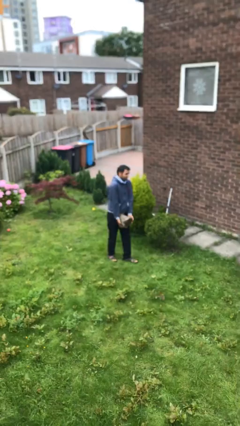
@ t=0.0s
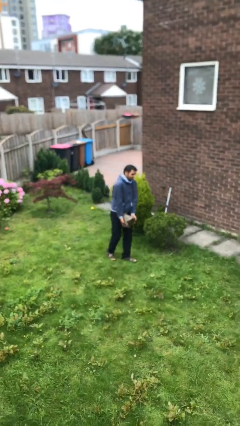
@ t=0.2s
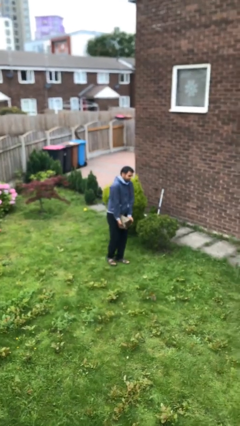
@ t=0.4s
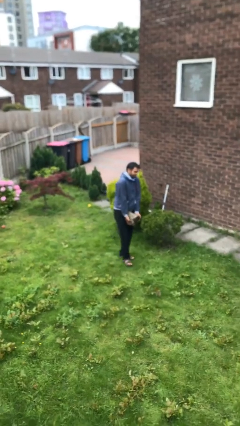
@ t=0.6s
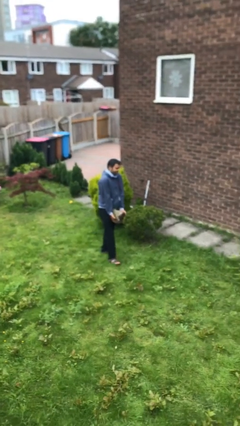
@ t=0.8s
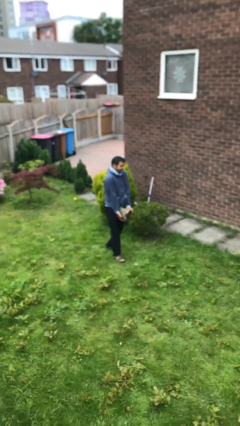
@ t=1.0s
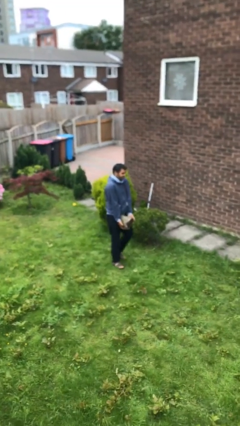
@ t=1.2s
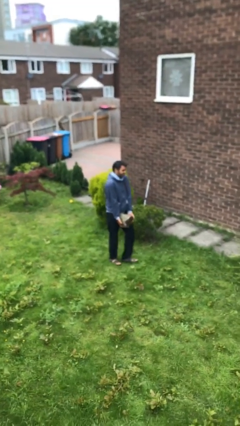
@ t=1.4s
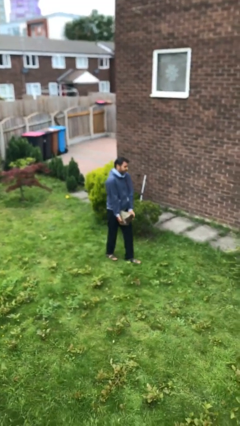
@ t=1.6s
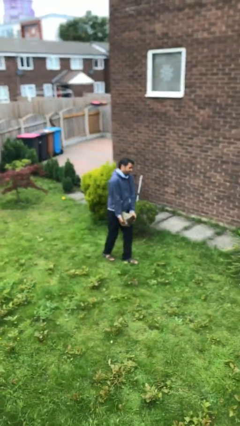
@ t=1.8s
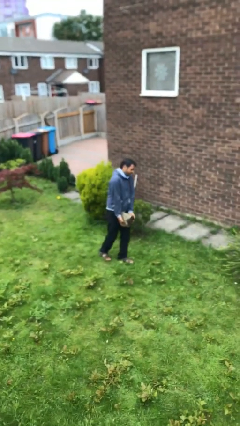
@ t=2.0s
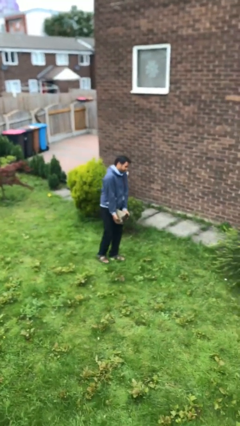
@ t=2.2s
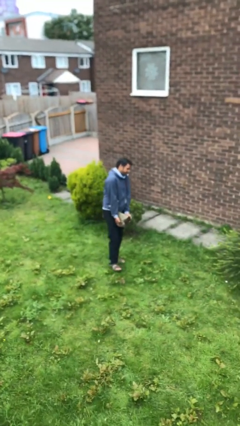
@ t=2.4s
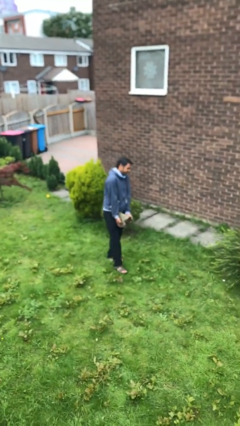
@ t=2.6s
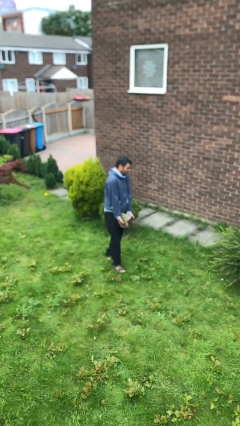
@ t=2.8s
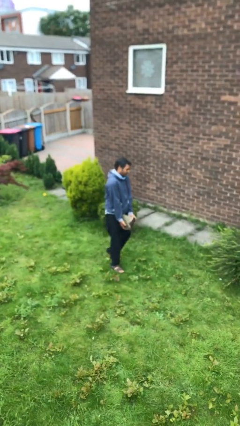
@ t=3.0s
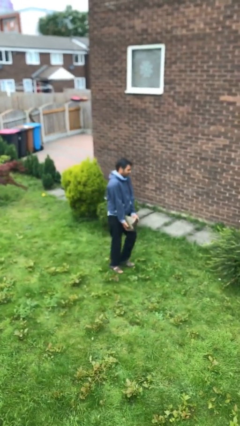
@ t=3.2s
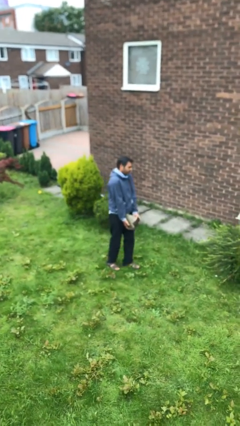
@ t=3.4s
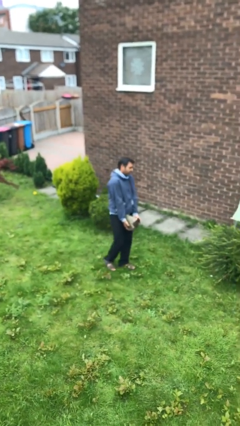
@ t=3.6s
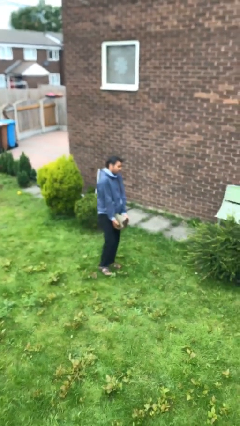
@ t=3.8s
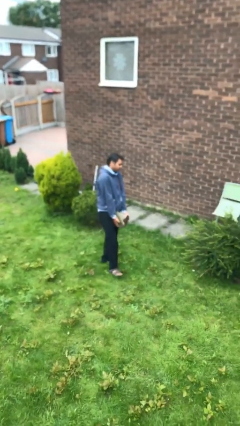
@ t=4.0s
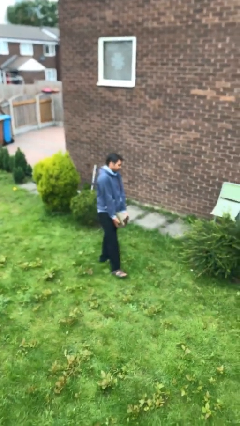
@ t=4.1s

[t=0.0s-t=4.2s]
person carries heavy object

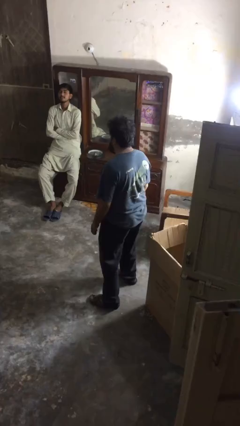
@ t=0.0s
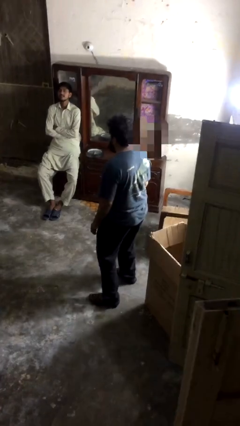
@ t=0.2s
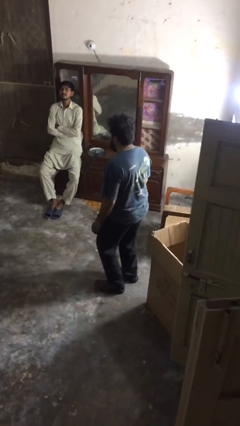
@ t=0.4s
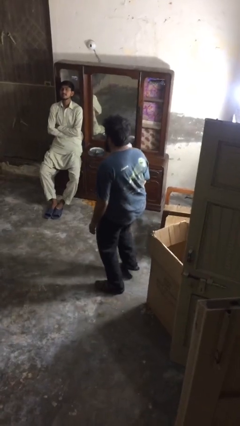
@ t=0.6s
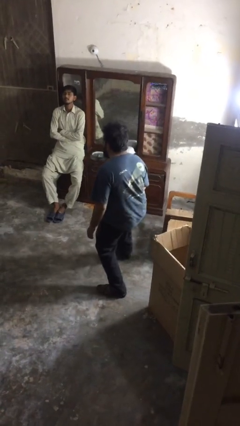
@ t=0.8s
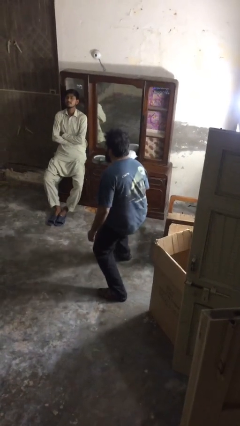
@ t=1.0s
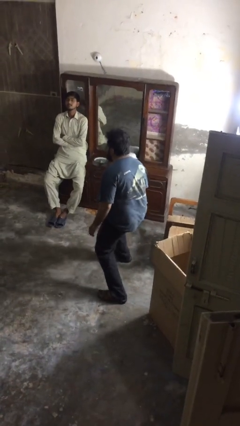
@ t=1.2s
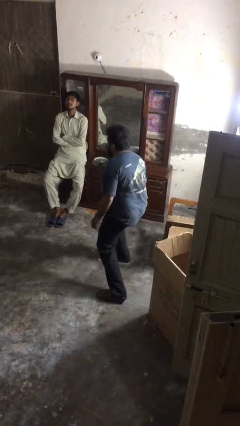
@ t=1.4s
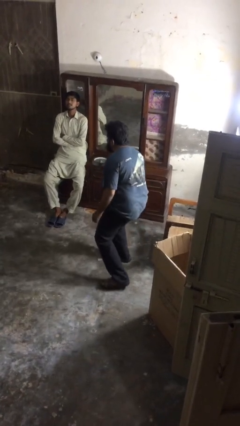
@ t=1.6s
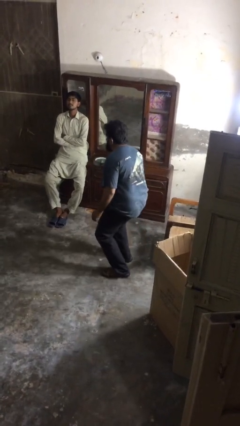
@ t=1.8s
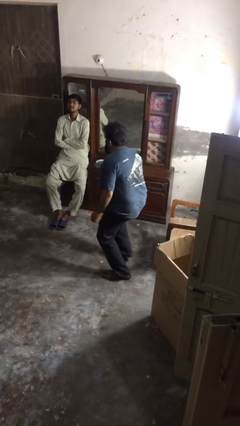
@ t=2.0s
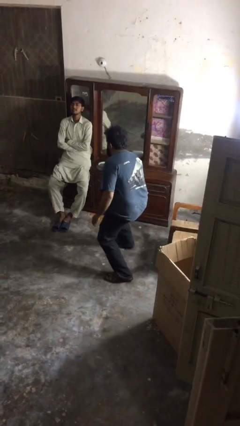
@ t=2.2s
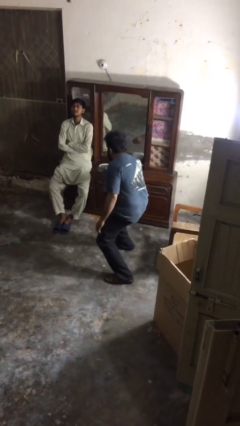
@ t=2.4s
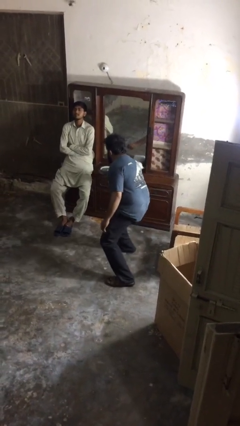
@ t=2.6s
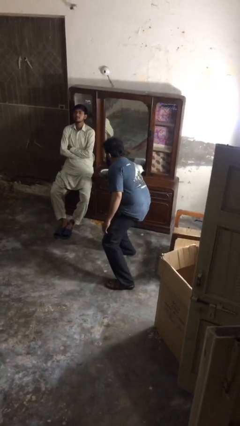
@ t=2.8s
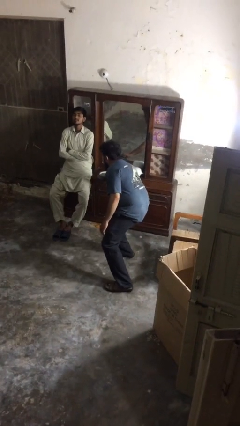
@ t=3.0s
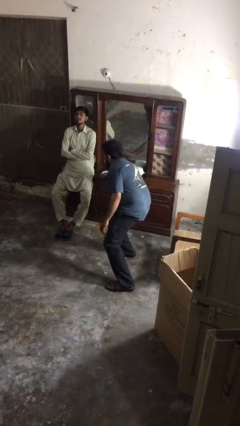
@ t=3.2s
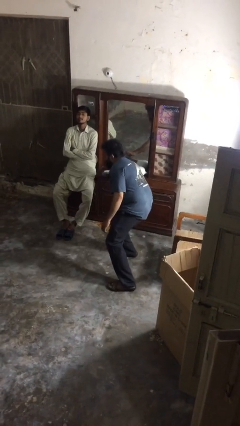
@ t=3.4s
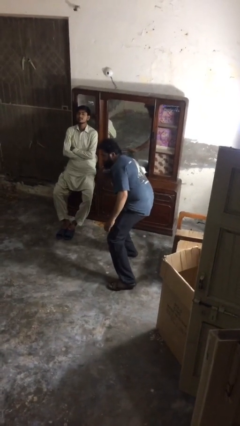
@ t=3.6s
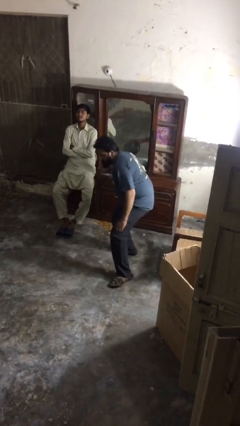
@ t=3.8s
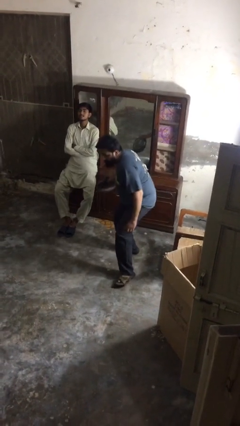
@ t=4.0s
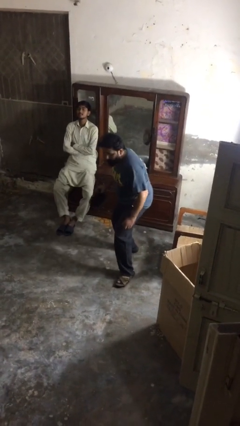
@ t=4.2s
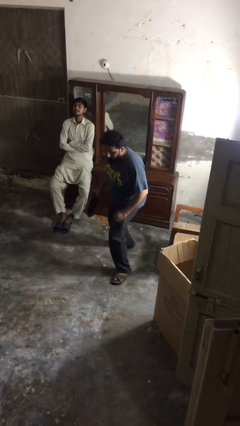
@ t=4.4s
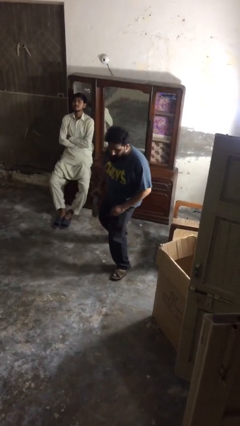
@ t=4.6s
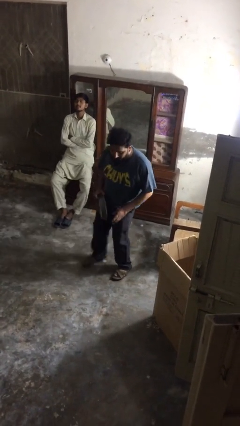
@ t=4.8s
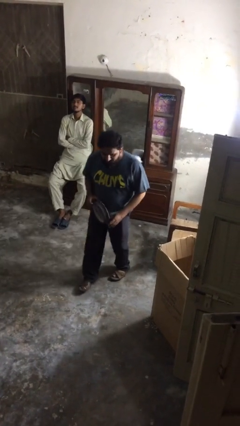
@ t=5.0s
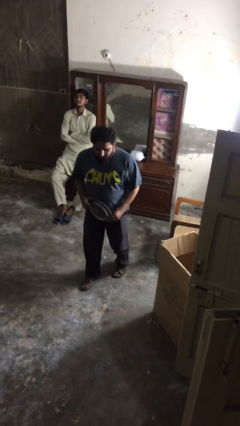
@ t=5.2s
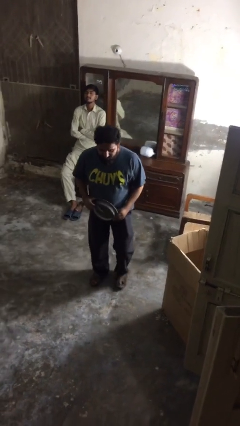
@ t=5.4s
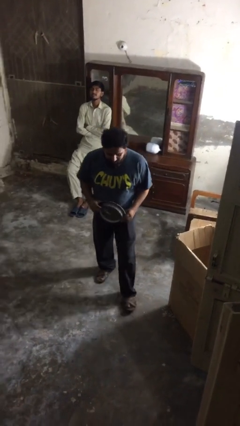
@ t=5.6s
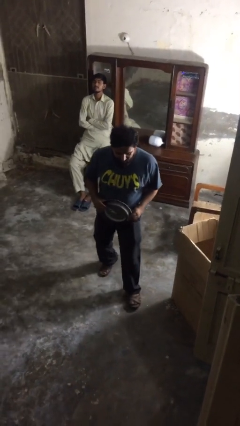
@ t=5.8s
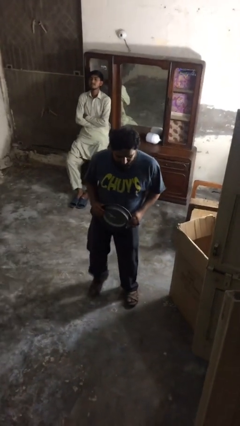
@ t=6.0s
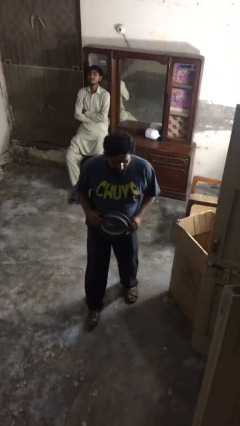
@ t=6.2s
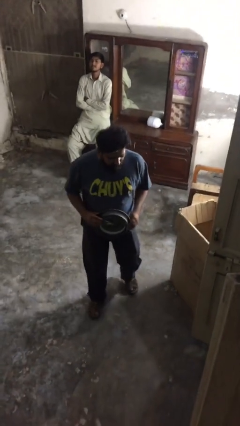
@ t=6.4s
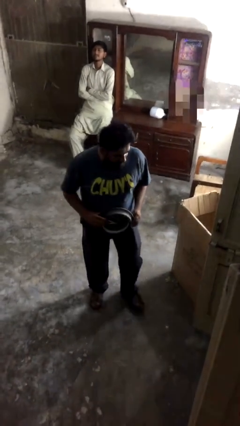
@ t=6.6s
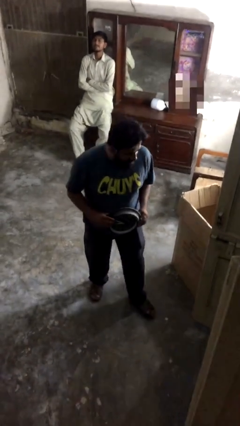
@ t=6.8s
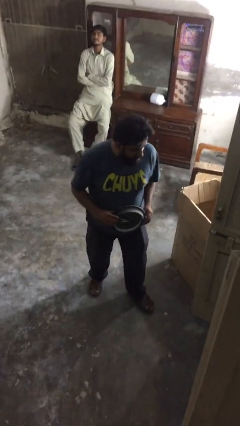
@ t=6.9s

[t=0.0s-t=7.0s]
person steals object from person

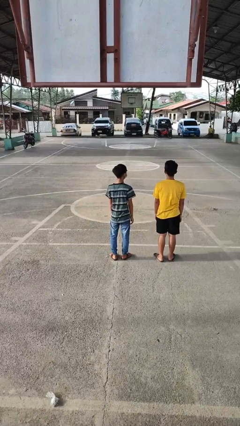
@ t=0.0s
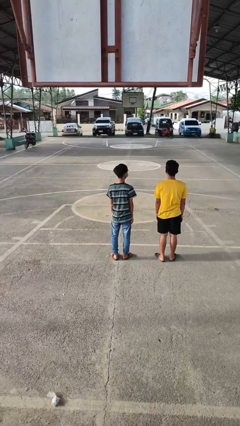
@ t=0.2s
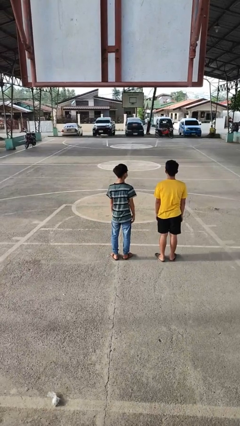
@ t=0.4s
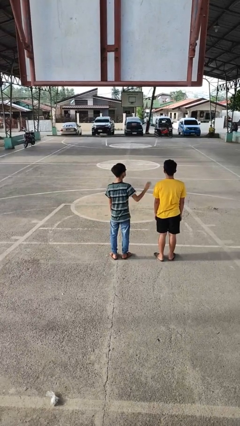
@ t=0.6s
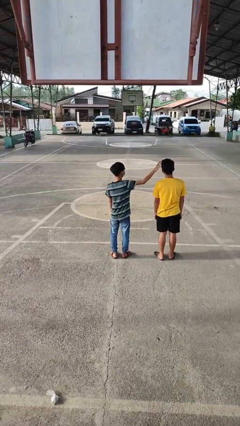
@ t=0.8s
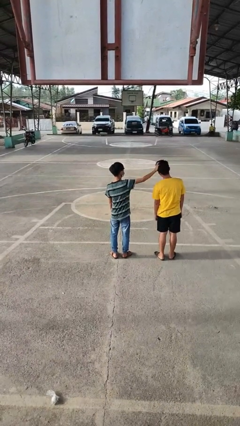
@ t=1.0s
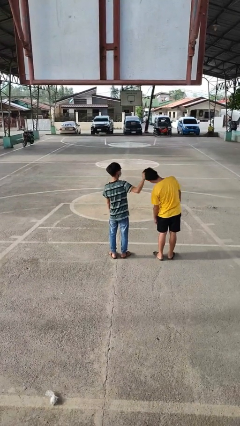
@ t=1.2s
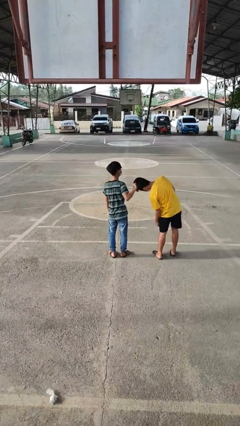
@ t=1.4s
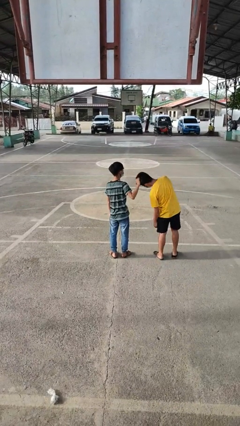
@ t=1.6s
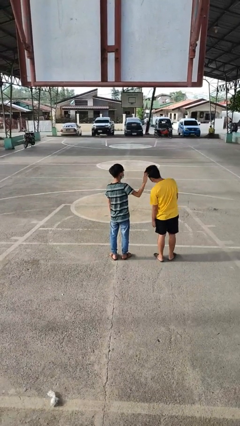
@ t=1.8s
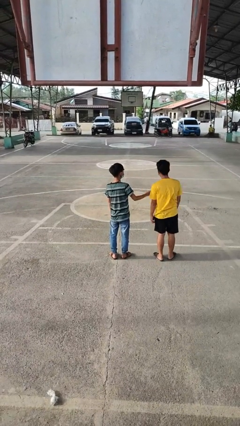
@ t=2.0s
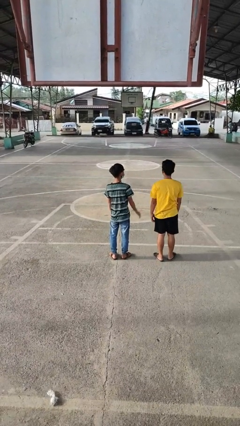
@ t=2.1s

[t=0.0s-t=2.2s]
person grabs person by hair

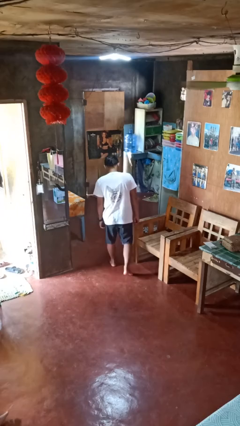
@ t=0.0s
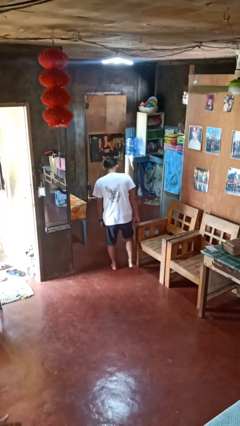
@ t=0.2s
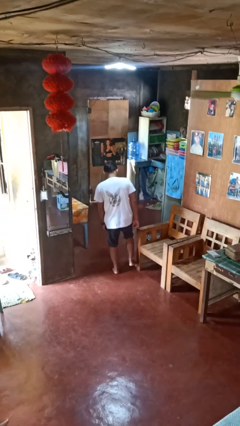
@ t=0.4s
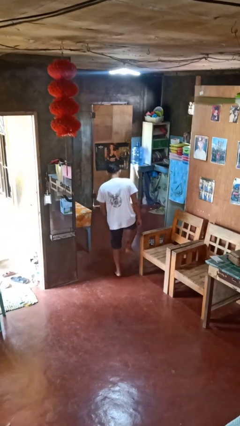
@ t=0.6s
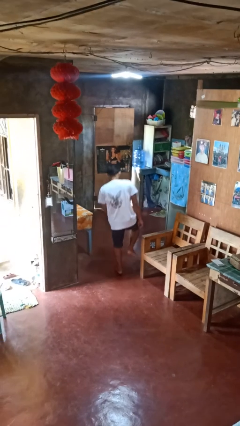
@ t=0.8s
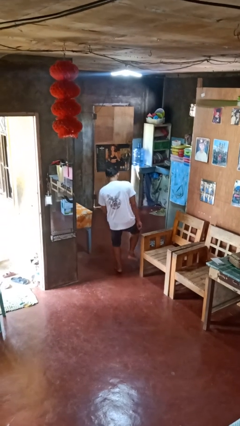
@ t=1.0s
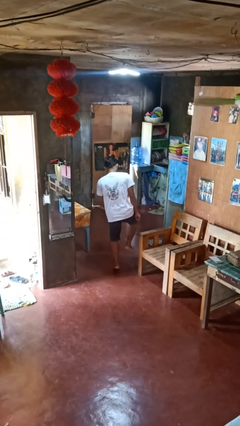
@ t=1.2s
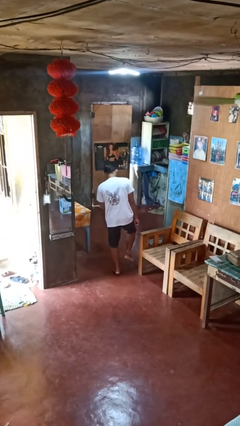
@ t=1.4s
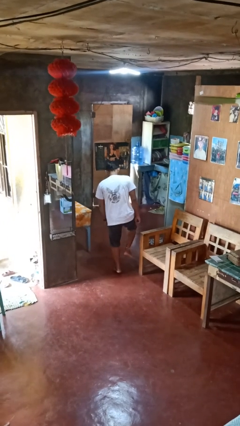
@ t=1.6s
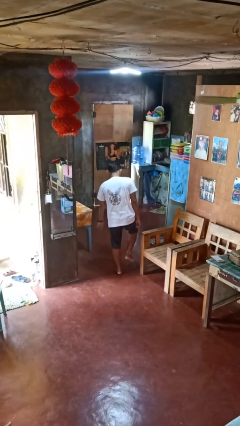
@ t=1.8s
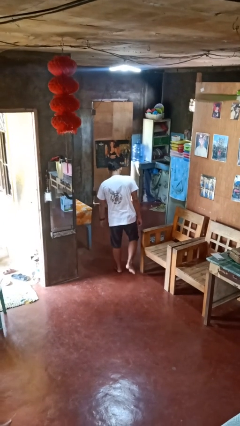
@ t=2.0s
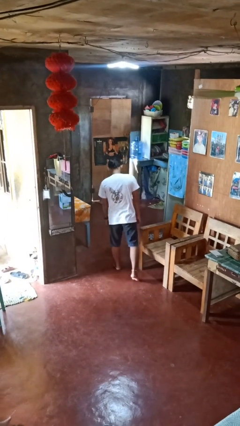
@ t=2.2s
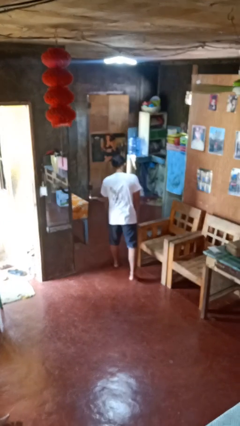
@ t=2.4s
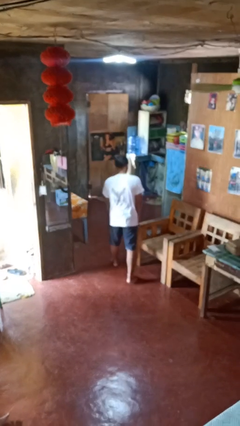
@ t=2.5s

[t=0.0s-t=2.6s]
person stubs toe

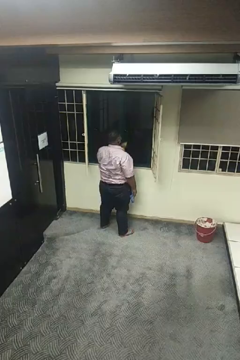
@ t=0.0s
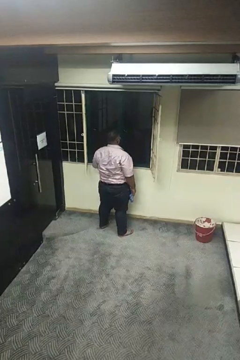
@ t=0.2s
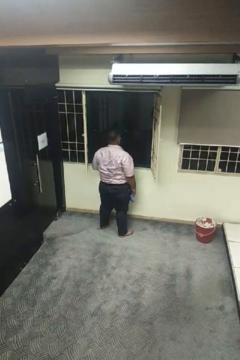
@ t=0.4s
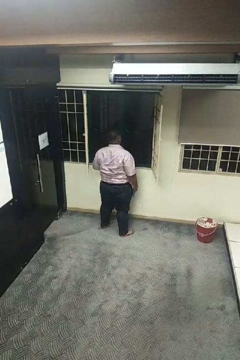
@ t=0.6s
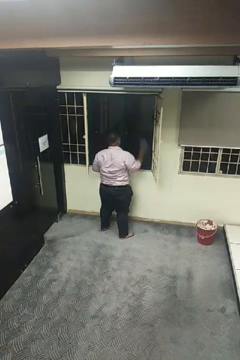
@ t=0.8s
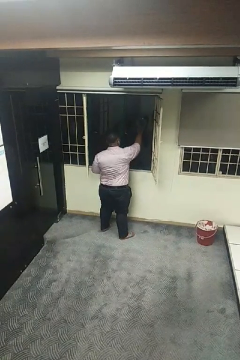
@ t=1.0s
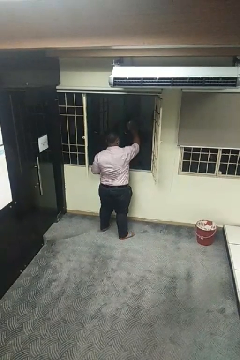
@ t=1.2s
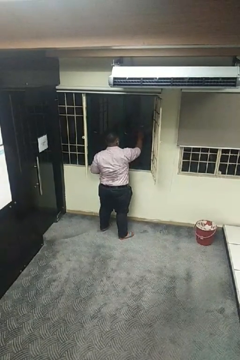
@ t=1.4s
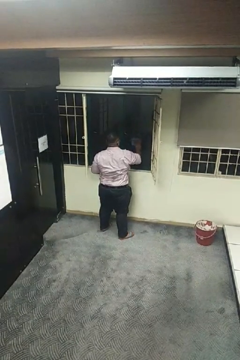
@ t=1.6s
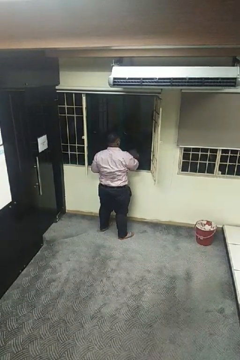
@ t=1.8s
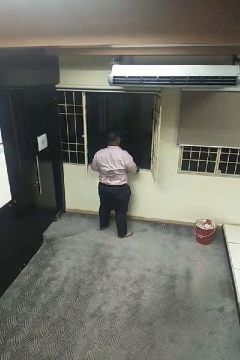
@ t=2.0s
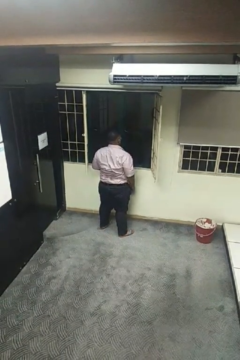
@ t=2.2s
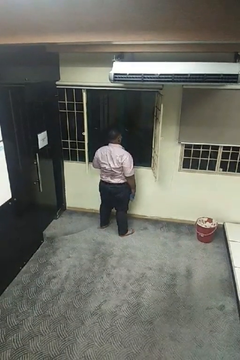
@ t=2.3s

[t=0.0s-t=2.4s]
person washes window
